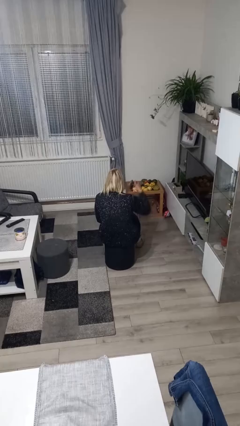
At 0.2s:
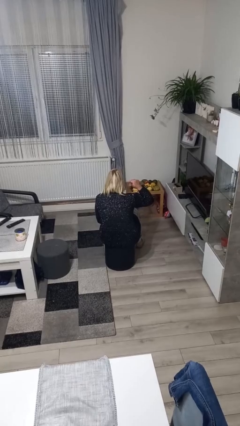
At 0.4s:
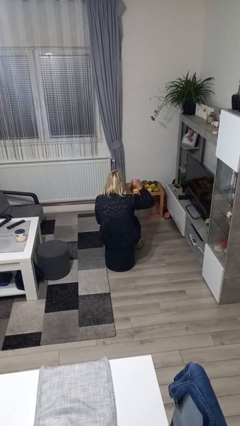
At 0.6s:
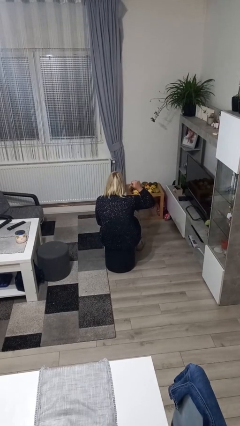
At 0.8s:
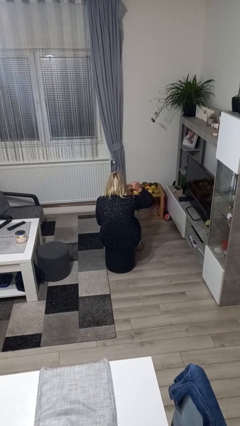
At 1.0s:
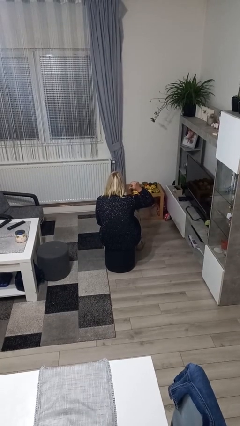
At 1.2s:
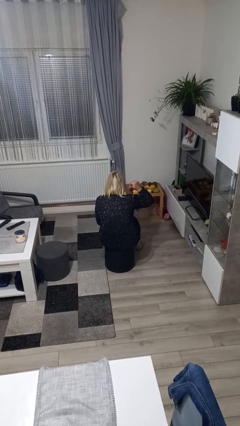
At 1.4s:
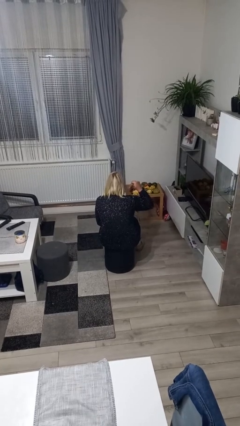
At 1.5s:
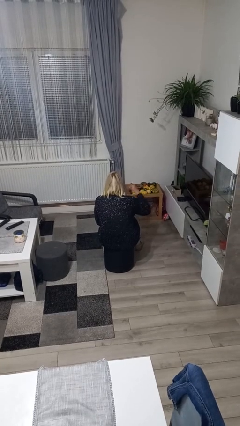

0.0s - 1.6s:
person gestures behind me

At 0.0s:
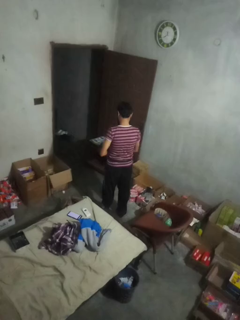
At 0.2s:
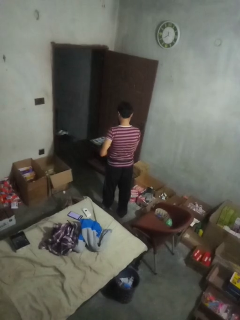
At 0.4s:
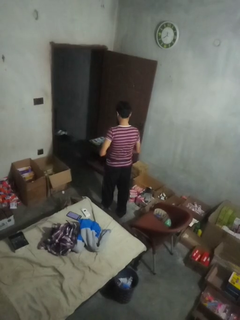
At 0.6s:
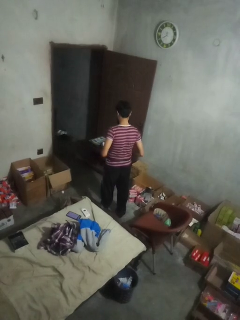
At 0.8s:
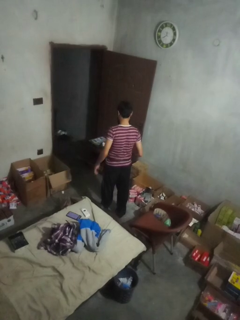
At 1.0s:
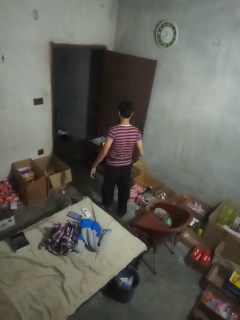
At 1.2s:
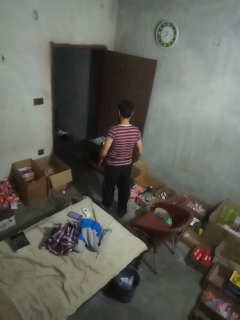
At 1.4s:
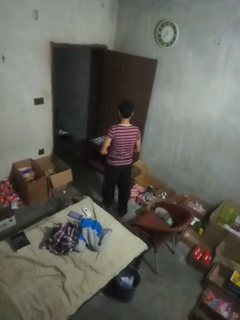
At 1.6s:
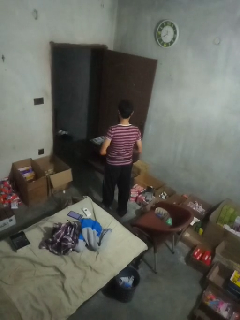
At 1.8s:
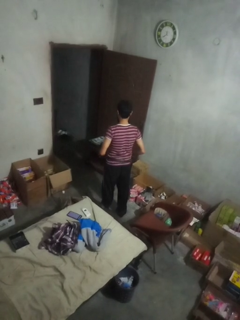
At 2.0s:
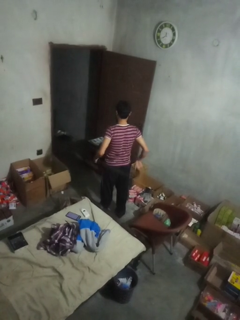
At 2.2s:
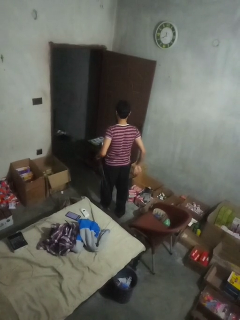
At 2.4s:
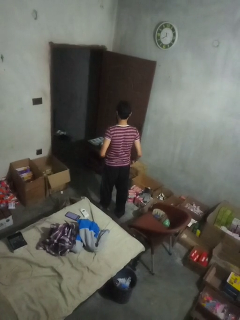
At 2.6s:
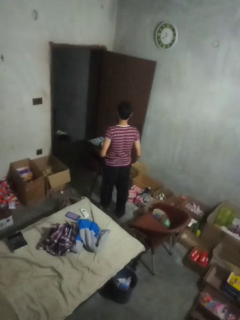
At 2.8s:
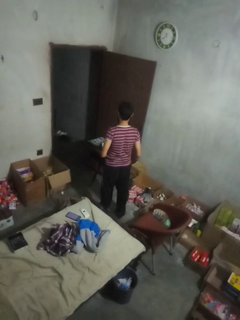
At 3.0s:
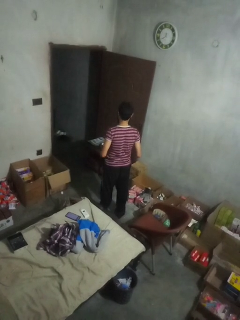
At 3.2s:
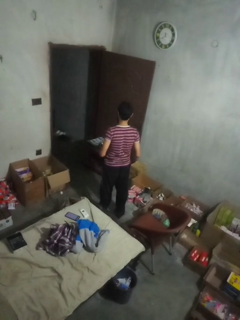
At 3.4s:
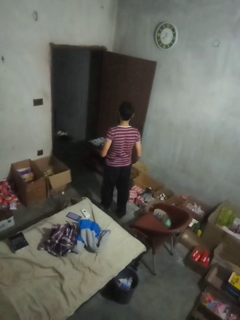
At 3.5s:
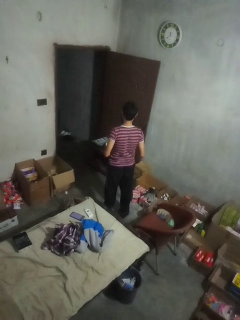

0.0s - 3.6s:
person takes off belt

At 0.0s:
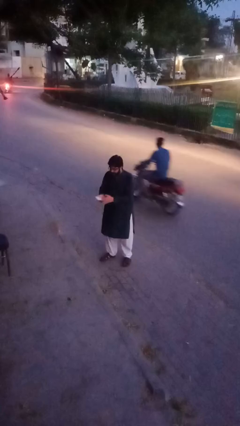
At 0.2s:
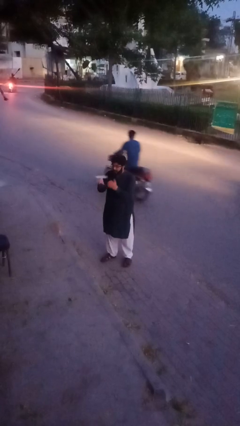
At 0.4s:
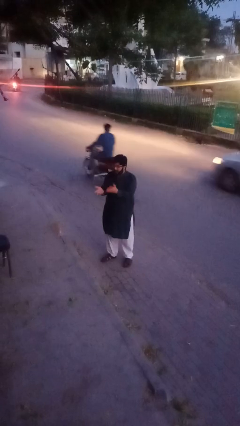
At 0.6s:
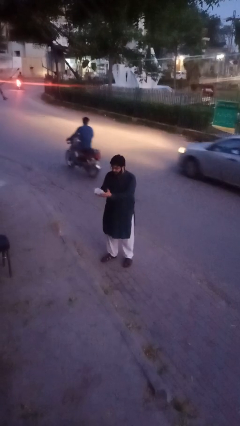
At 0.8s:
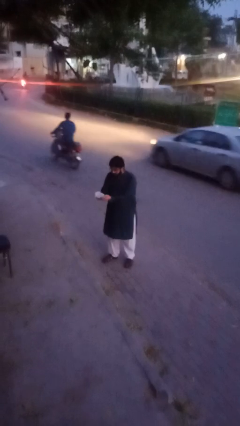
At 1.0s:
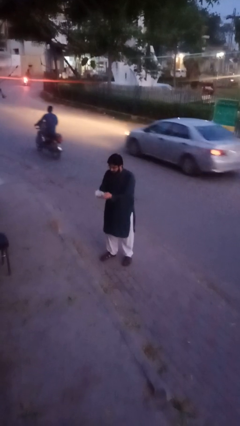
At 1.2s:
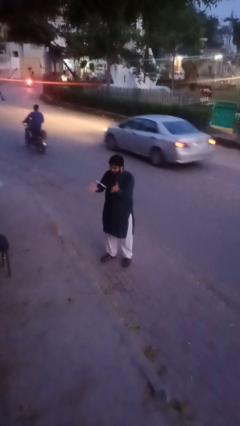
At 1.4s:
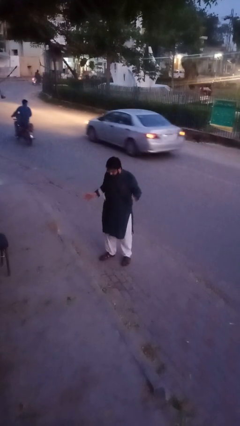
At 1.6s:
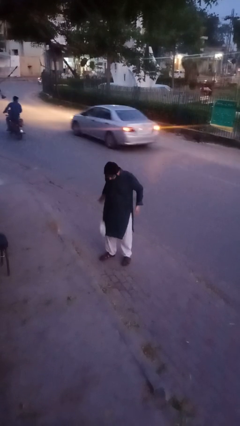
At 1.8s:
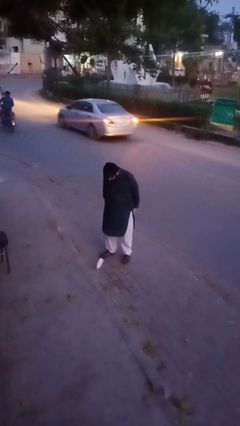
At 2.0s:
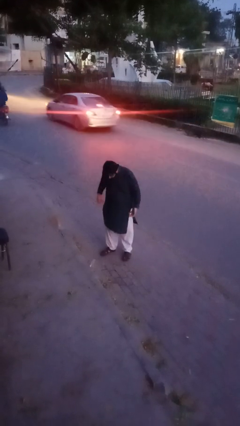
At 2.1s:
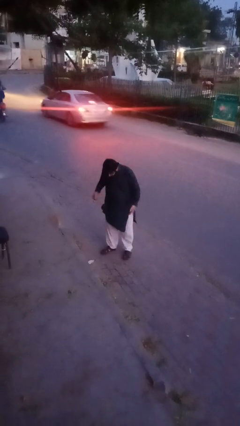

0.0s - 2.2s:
person drops object

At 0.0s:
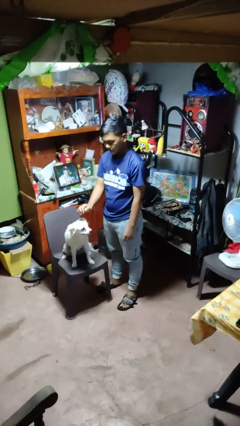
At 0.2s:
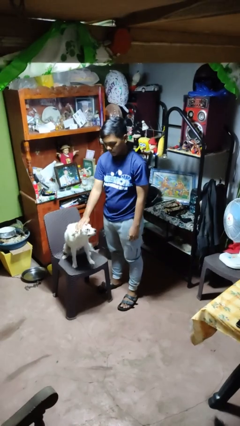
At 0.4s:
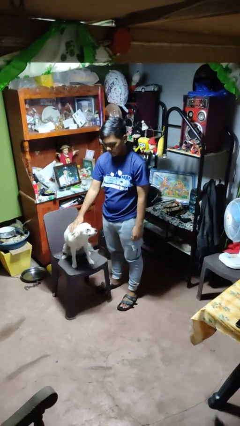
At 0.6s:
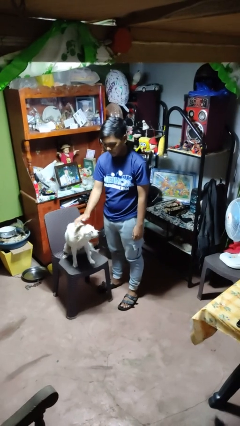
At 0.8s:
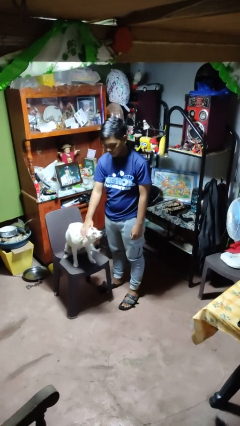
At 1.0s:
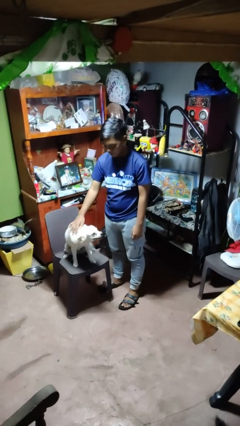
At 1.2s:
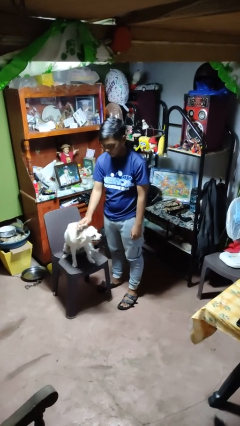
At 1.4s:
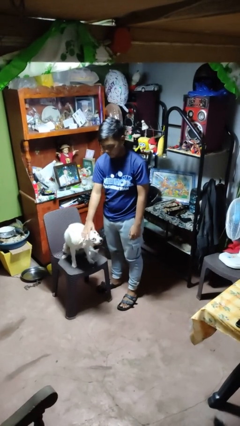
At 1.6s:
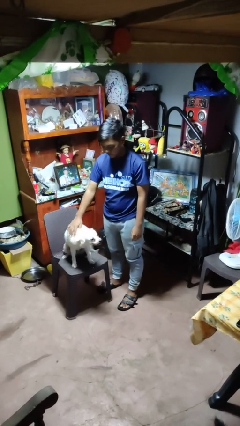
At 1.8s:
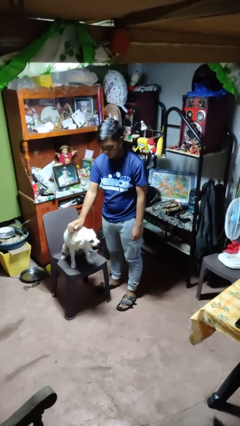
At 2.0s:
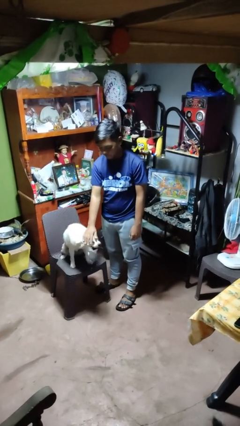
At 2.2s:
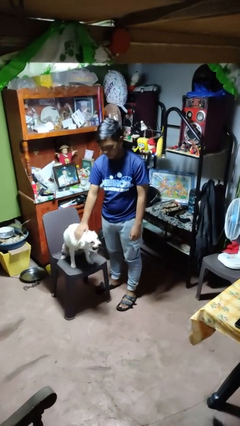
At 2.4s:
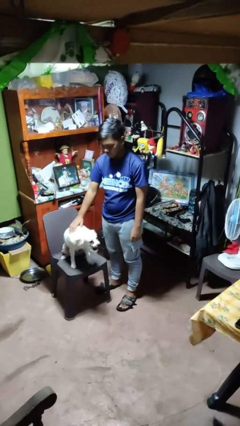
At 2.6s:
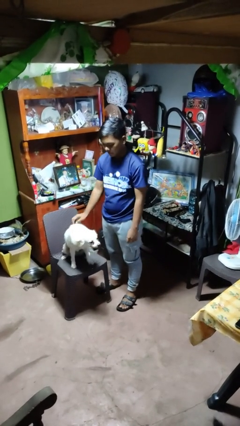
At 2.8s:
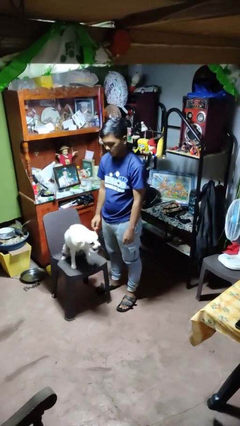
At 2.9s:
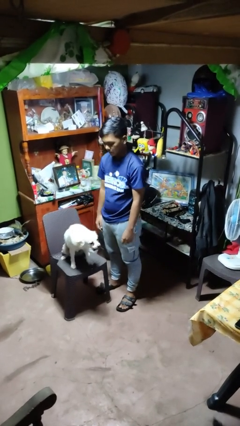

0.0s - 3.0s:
person pets dog

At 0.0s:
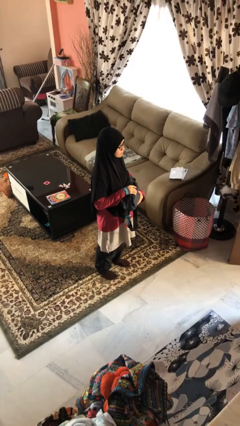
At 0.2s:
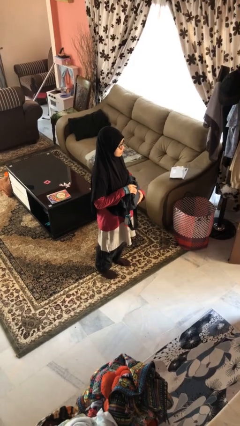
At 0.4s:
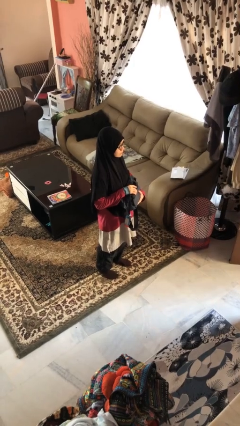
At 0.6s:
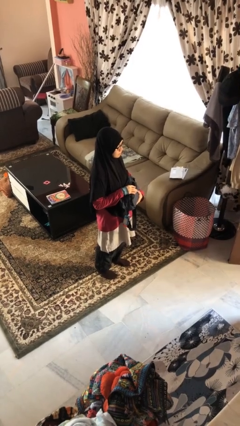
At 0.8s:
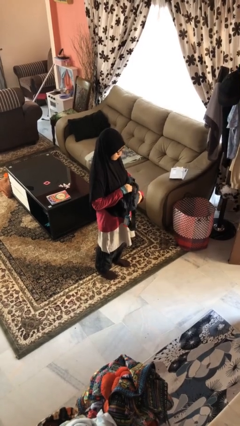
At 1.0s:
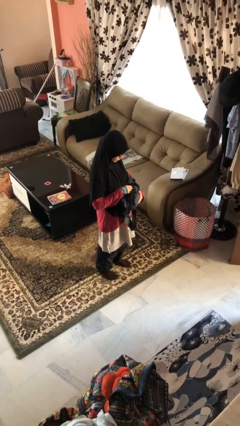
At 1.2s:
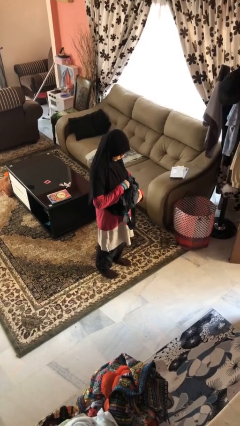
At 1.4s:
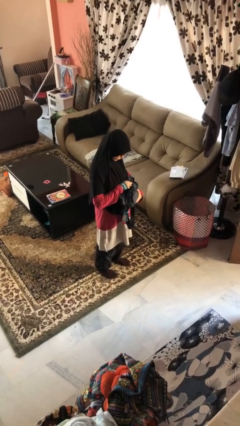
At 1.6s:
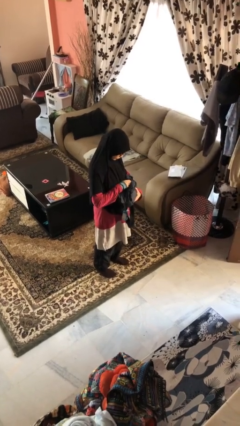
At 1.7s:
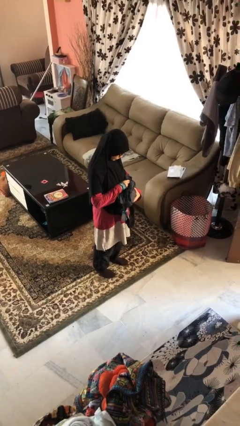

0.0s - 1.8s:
person searches in purse

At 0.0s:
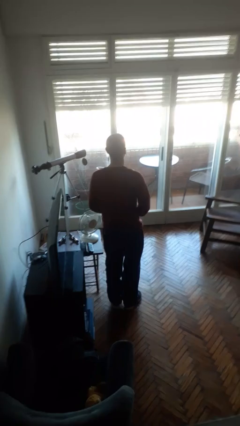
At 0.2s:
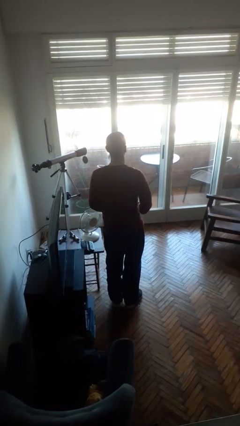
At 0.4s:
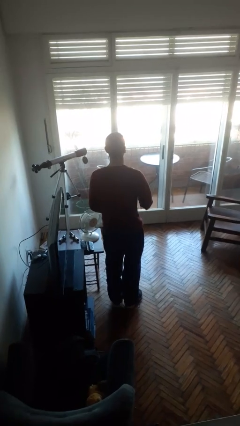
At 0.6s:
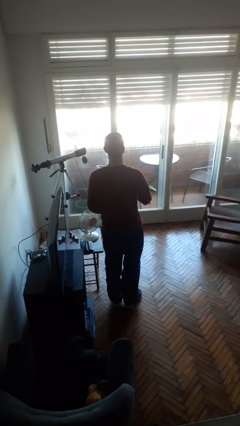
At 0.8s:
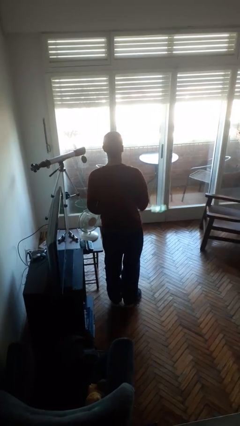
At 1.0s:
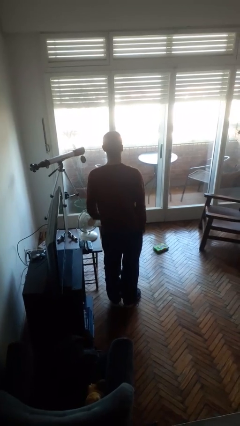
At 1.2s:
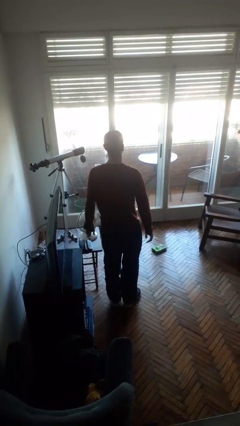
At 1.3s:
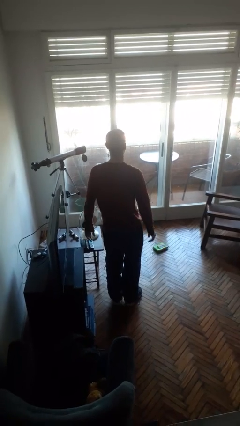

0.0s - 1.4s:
person throws object to ground

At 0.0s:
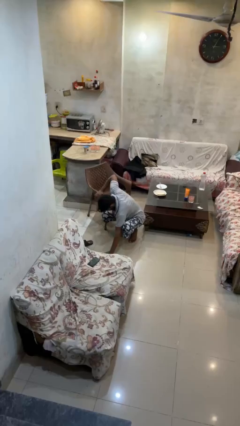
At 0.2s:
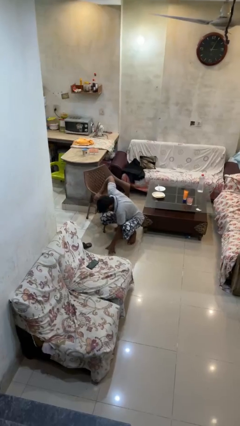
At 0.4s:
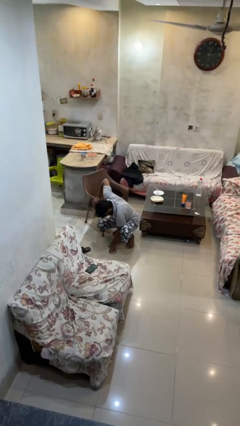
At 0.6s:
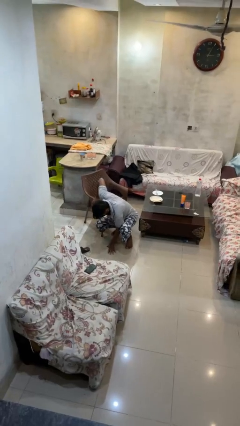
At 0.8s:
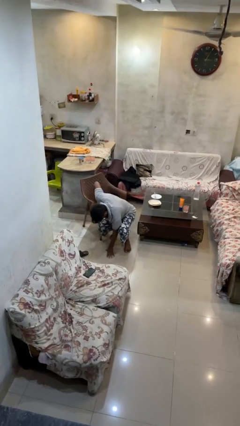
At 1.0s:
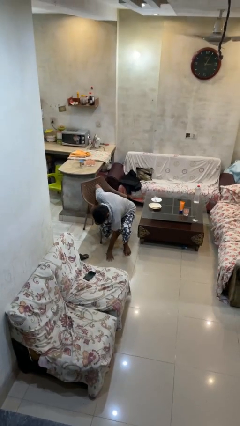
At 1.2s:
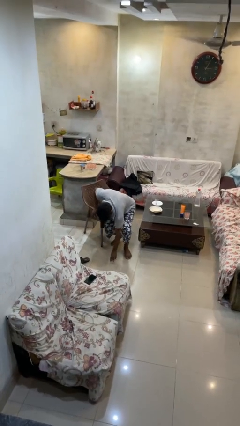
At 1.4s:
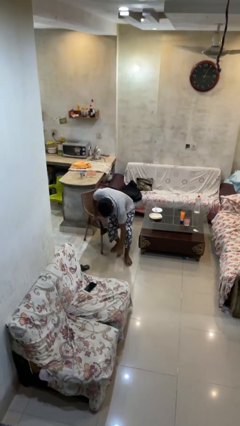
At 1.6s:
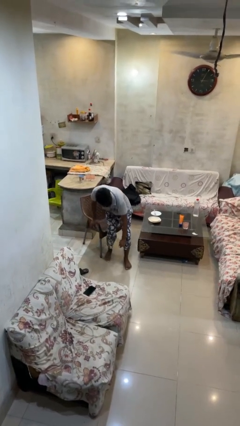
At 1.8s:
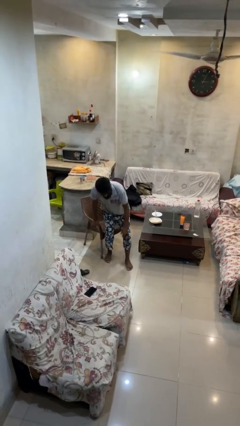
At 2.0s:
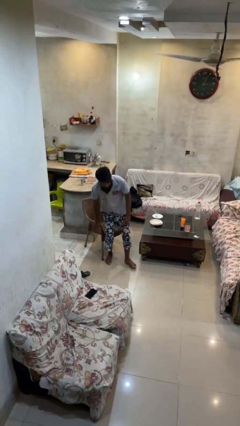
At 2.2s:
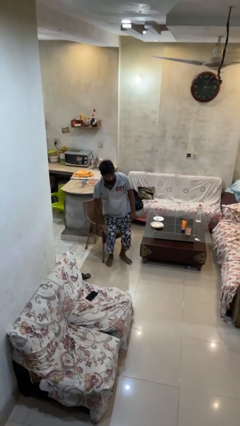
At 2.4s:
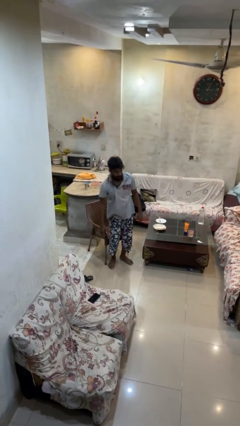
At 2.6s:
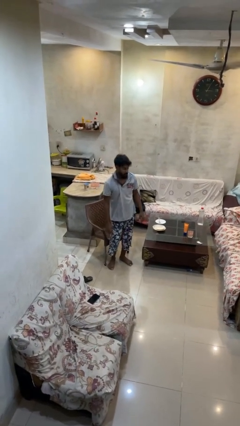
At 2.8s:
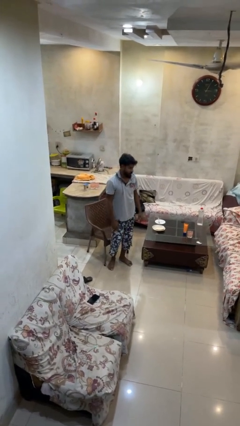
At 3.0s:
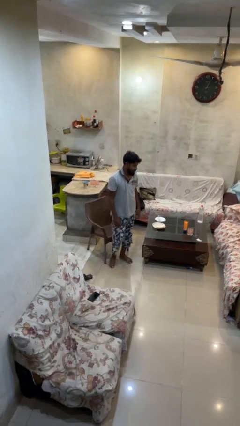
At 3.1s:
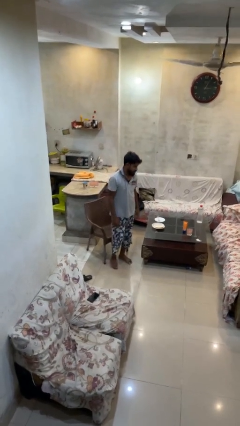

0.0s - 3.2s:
person stands up from floor

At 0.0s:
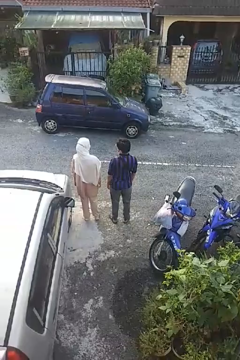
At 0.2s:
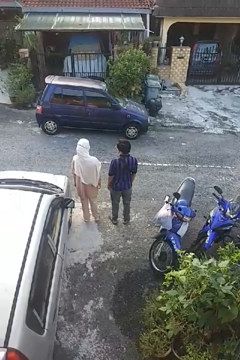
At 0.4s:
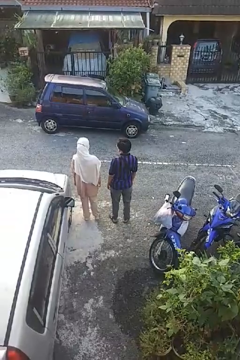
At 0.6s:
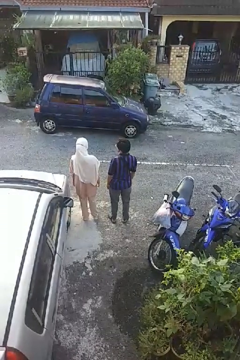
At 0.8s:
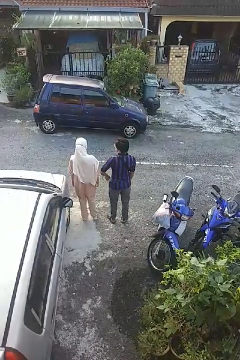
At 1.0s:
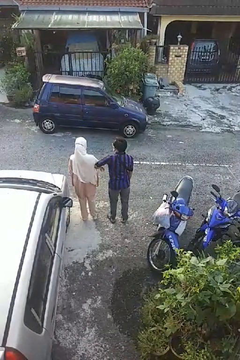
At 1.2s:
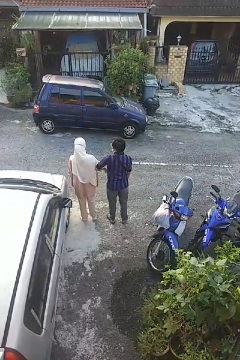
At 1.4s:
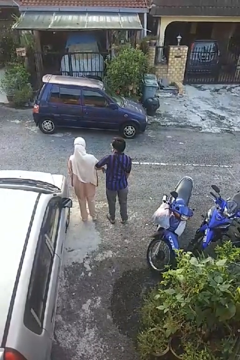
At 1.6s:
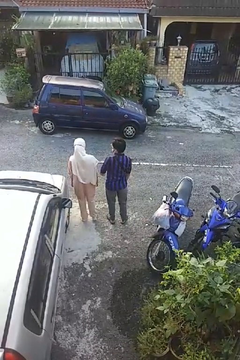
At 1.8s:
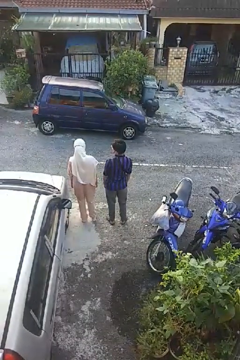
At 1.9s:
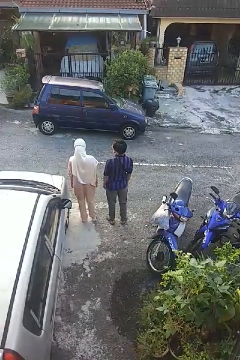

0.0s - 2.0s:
person nudges person with elbow
